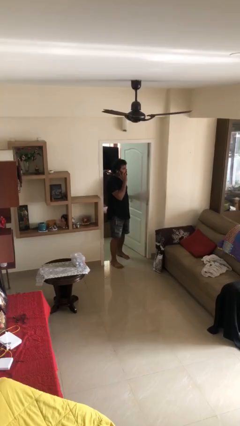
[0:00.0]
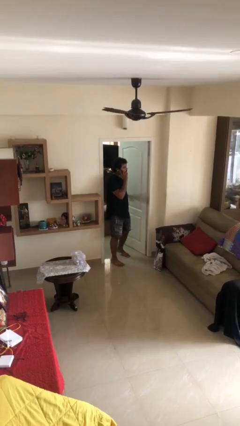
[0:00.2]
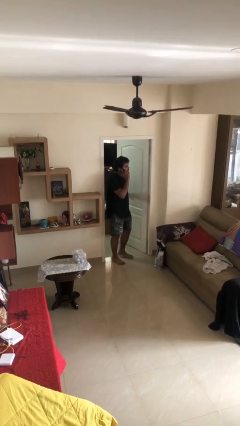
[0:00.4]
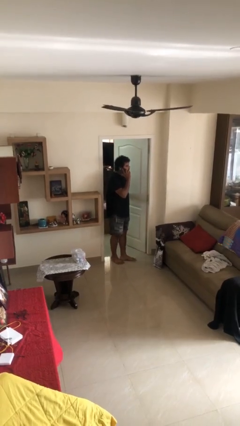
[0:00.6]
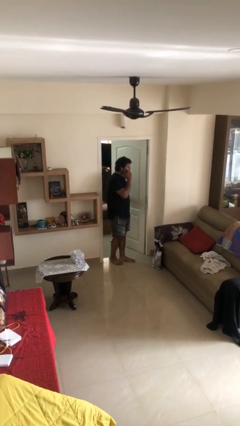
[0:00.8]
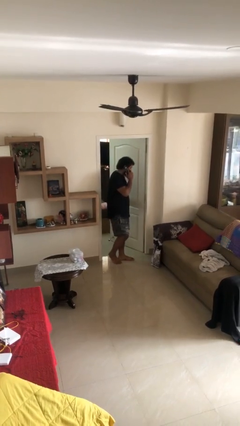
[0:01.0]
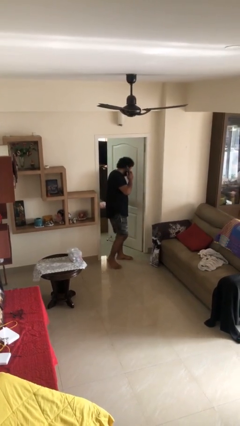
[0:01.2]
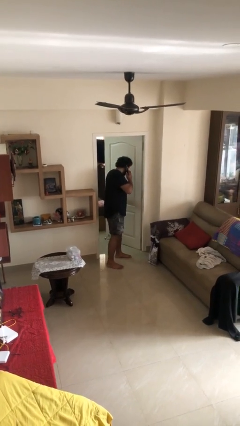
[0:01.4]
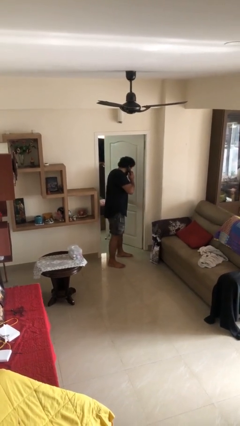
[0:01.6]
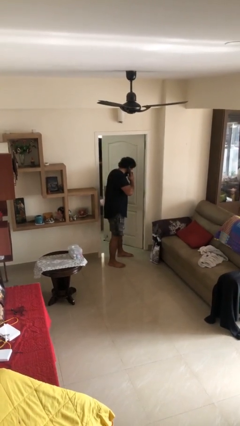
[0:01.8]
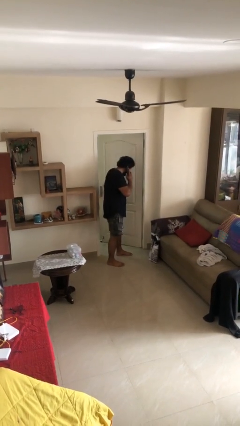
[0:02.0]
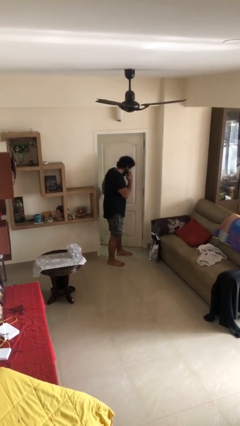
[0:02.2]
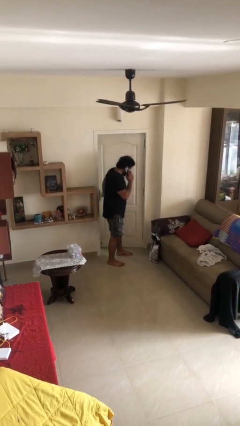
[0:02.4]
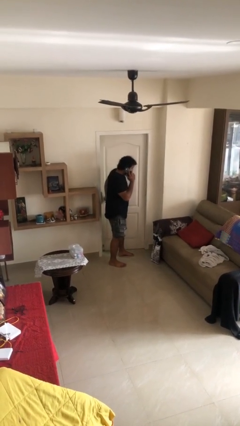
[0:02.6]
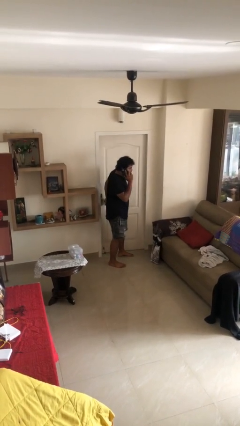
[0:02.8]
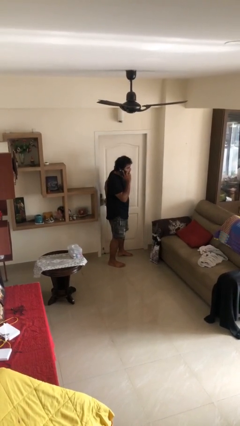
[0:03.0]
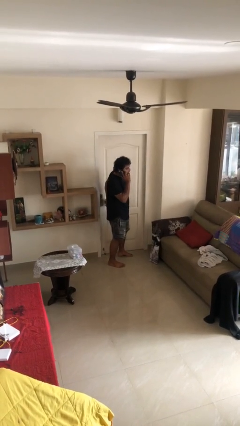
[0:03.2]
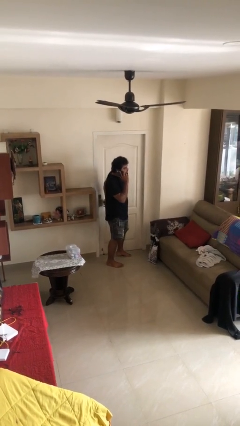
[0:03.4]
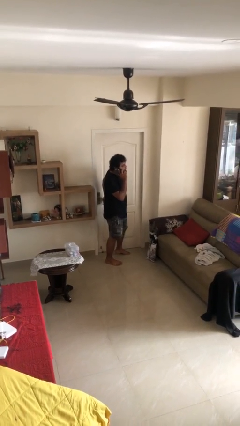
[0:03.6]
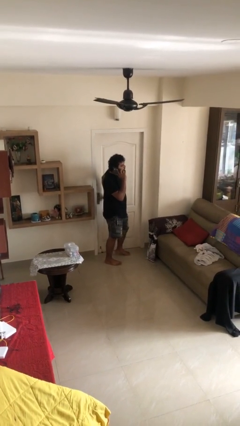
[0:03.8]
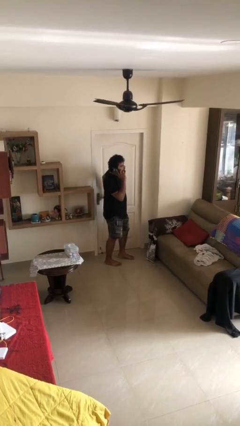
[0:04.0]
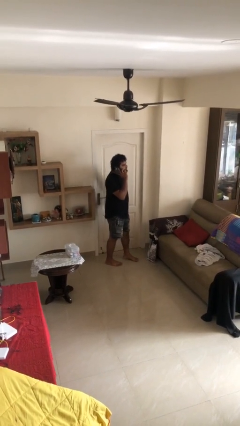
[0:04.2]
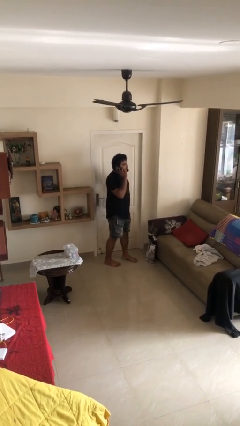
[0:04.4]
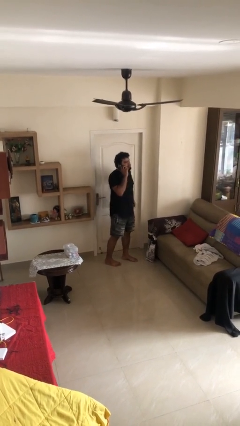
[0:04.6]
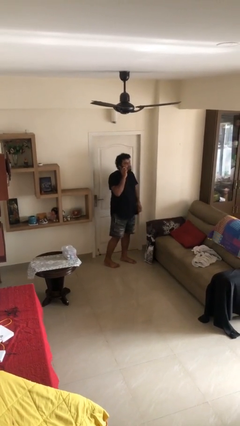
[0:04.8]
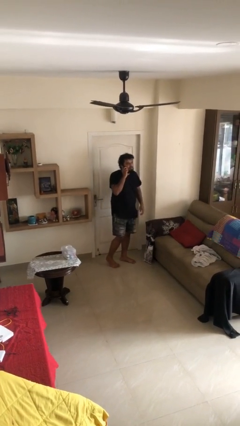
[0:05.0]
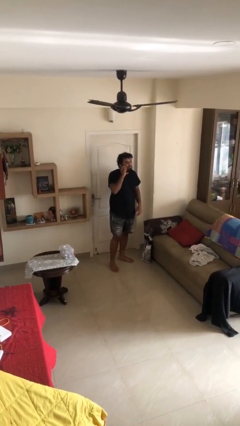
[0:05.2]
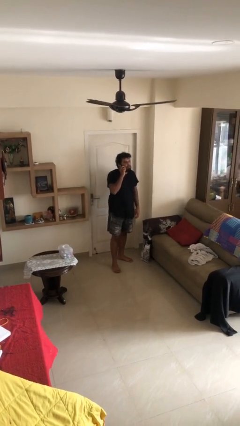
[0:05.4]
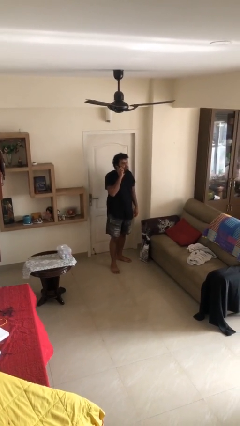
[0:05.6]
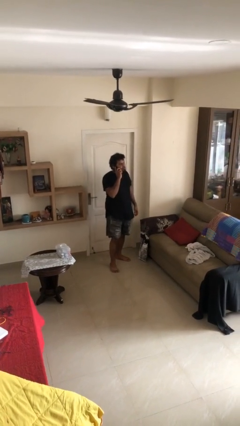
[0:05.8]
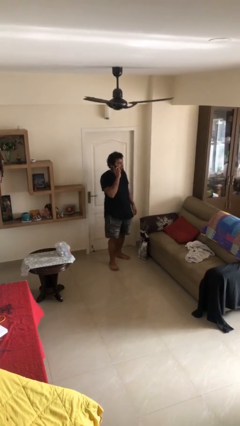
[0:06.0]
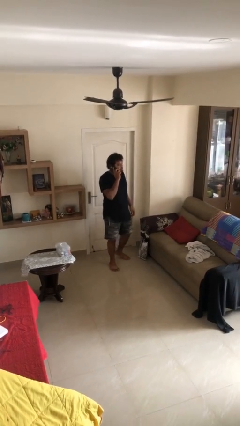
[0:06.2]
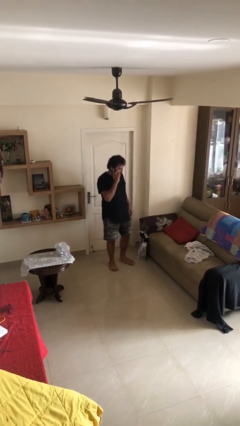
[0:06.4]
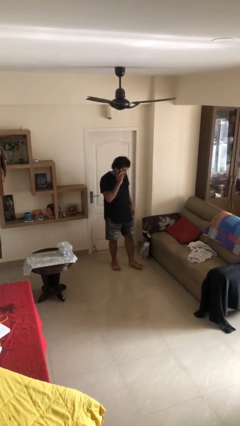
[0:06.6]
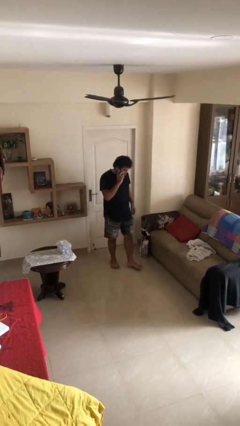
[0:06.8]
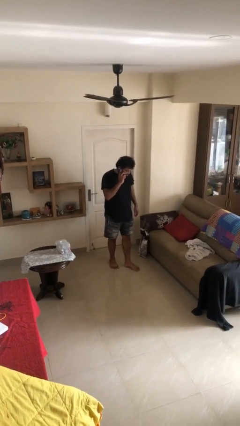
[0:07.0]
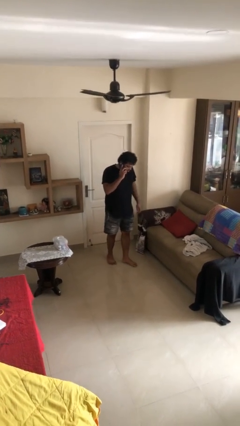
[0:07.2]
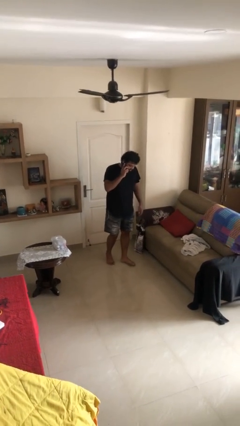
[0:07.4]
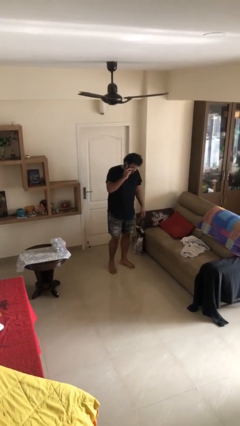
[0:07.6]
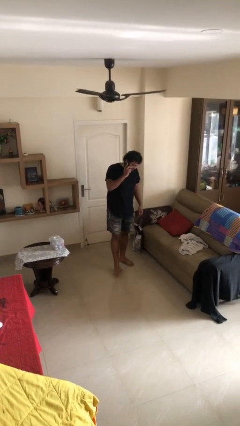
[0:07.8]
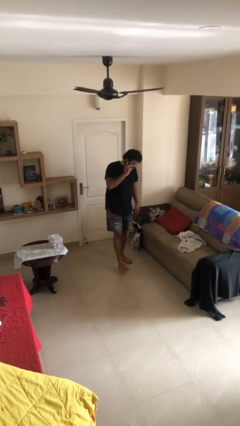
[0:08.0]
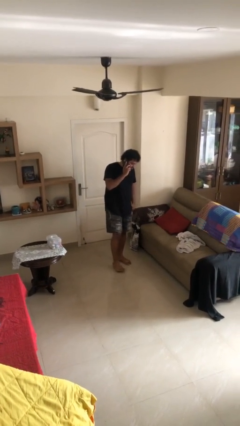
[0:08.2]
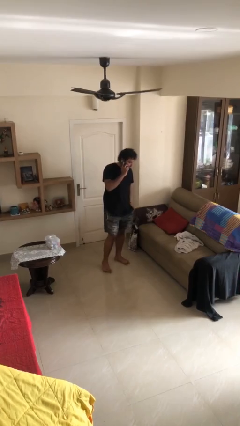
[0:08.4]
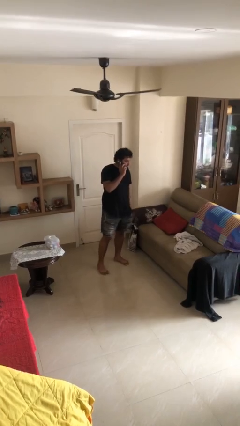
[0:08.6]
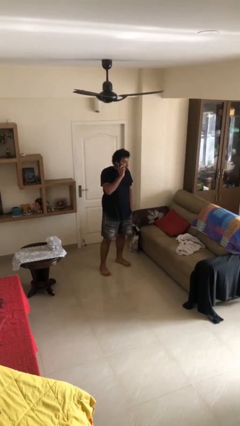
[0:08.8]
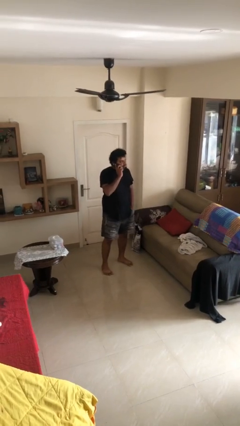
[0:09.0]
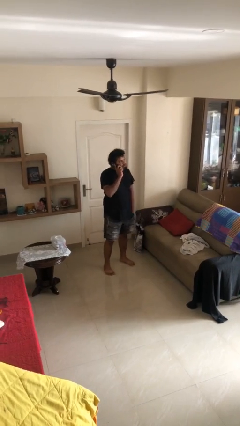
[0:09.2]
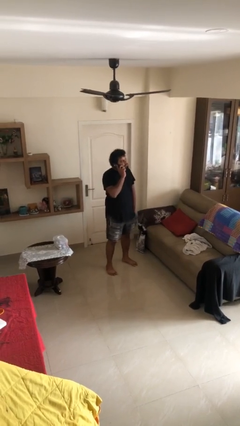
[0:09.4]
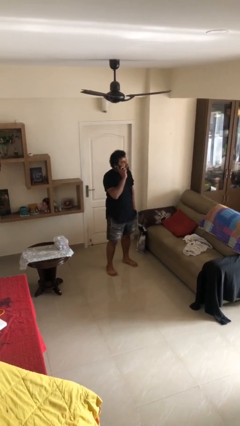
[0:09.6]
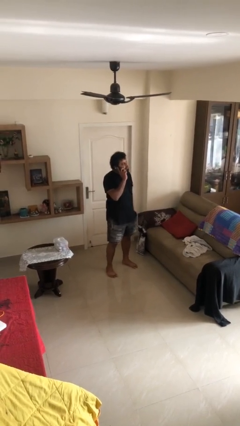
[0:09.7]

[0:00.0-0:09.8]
person closes facility door

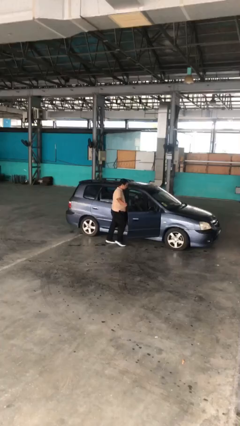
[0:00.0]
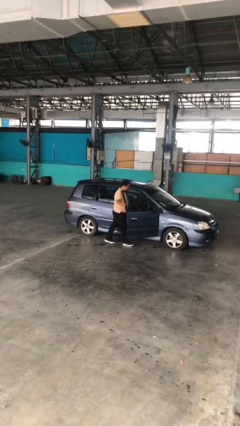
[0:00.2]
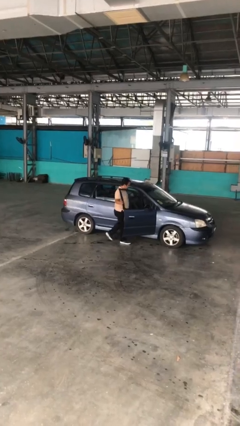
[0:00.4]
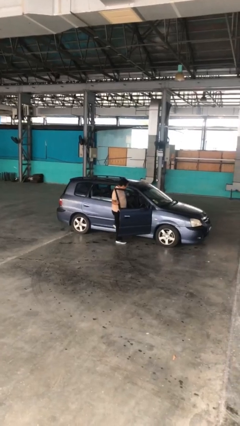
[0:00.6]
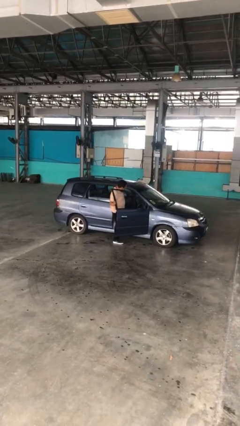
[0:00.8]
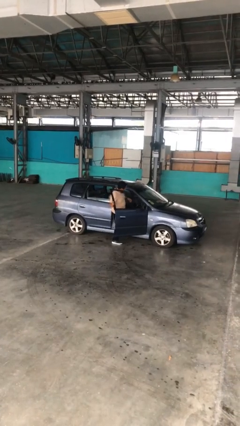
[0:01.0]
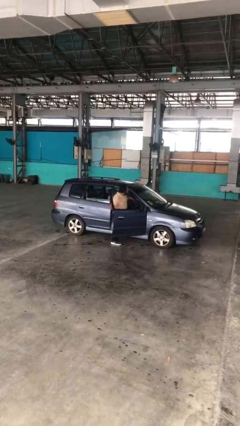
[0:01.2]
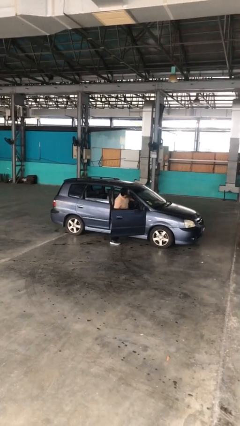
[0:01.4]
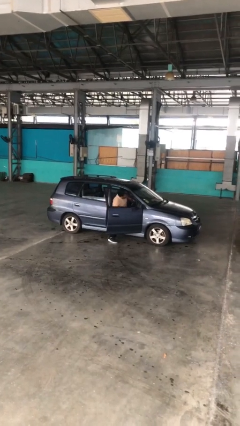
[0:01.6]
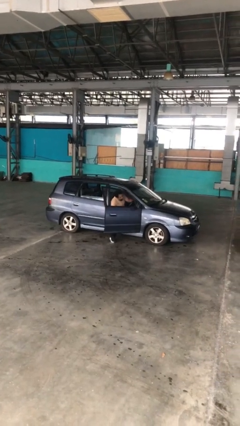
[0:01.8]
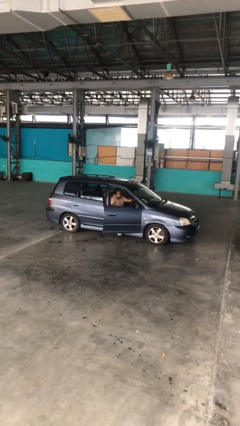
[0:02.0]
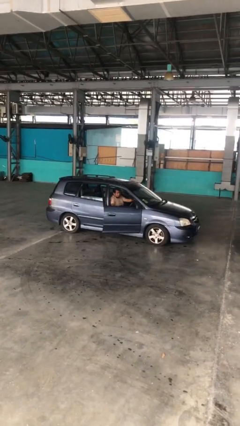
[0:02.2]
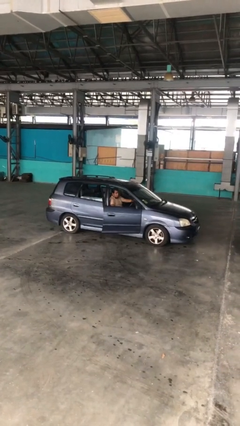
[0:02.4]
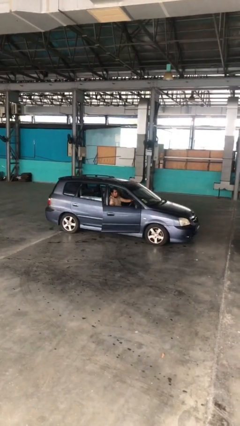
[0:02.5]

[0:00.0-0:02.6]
person enters car

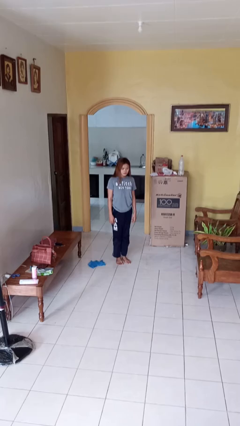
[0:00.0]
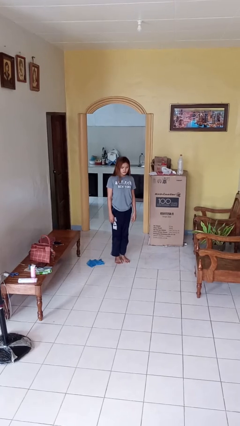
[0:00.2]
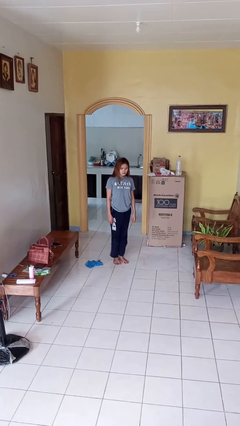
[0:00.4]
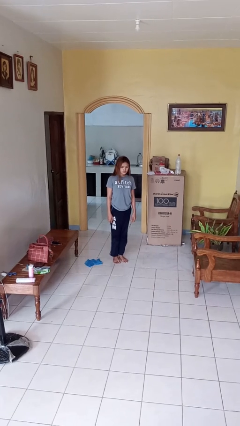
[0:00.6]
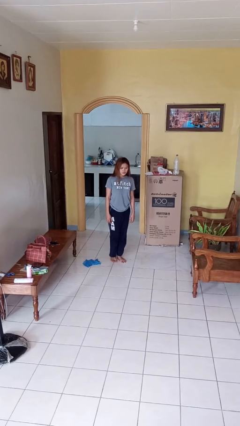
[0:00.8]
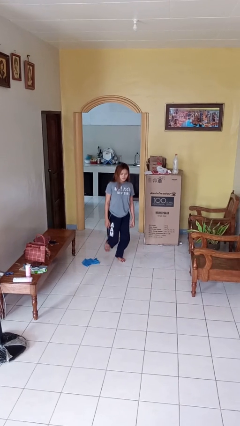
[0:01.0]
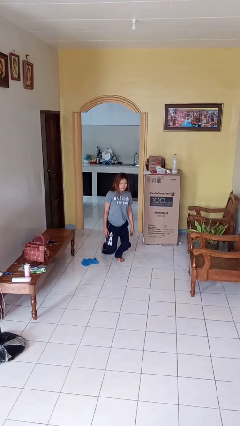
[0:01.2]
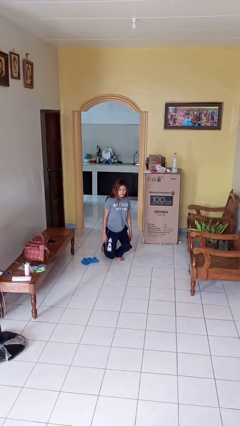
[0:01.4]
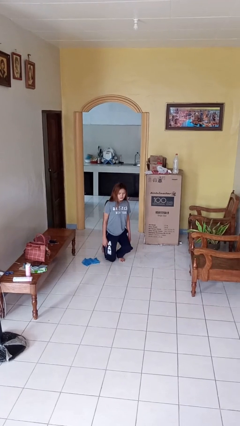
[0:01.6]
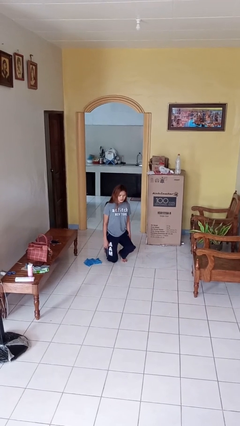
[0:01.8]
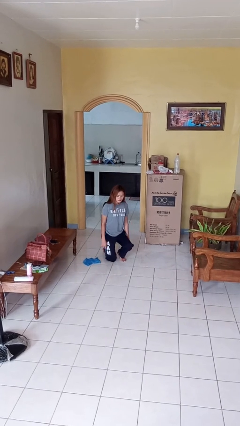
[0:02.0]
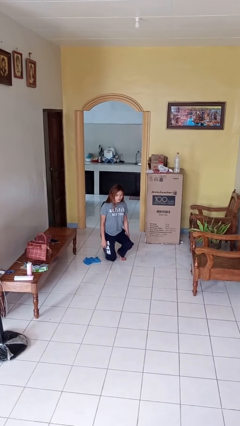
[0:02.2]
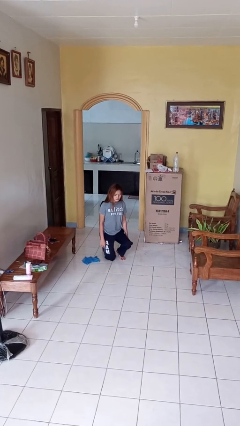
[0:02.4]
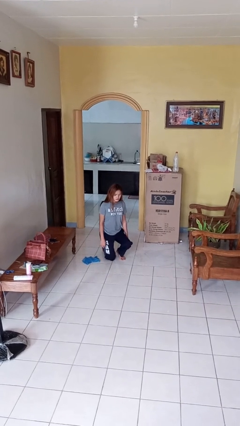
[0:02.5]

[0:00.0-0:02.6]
person kneels

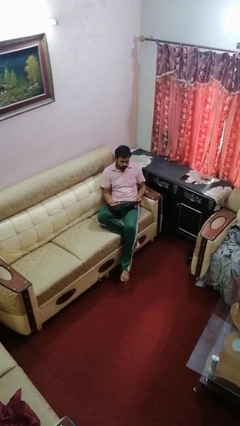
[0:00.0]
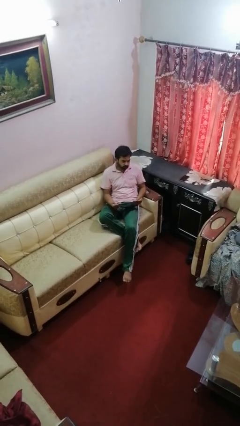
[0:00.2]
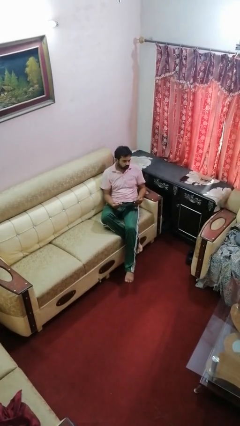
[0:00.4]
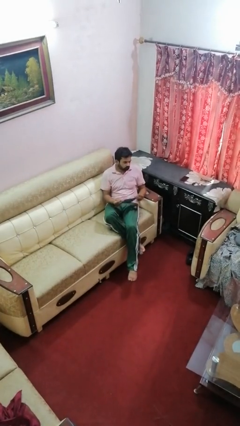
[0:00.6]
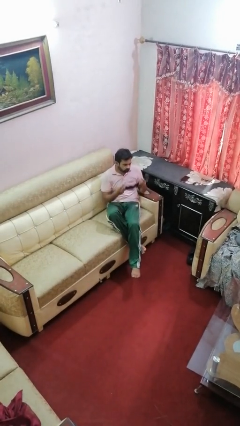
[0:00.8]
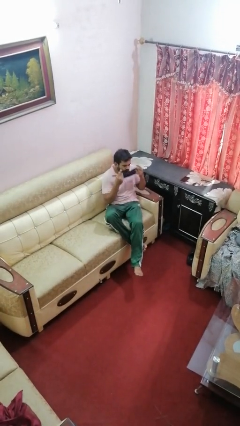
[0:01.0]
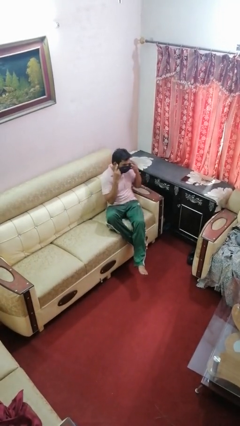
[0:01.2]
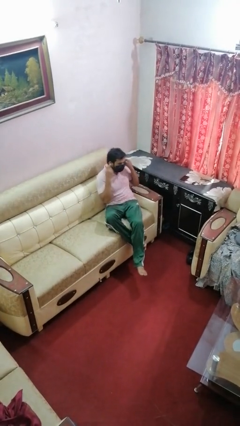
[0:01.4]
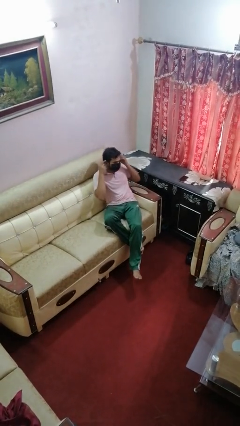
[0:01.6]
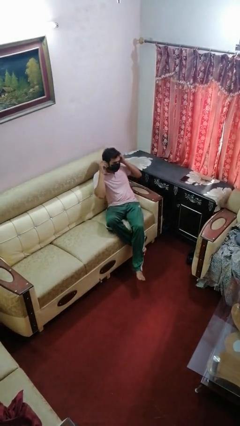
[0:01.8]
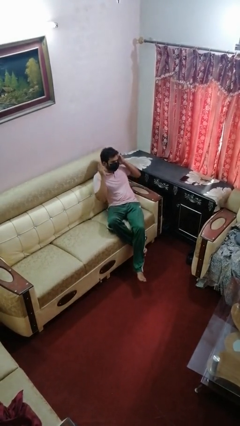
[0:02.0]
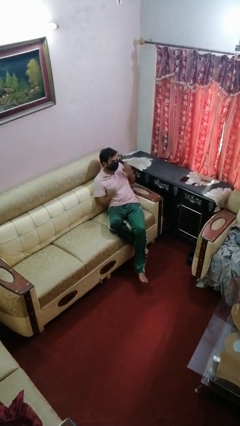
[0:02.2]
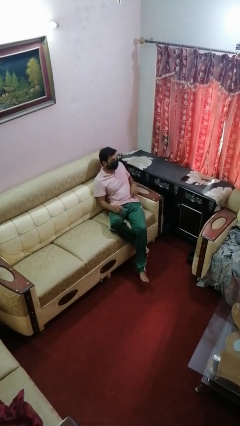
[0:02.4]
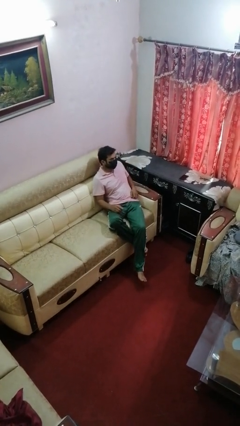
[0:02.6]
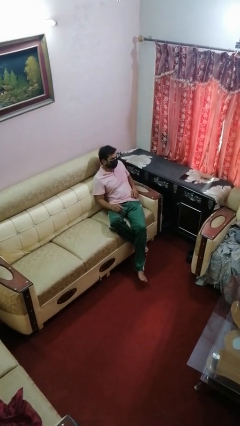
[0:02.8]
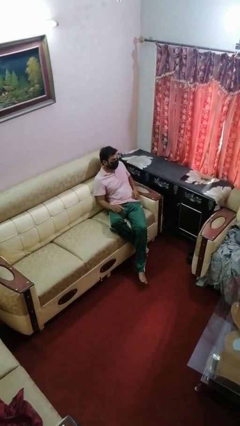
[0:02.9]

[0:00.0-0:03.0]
person puts on facemask
